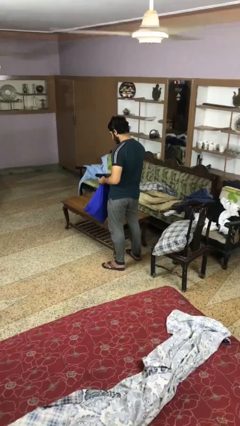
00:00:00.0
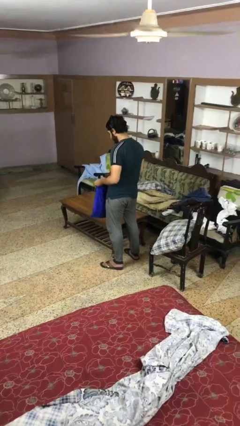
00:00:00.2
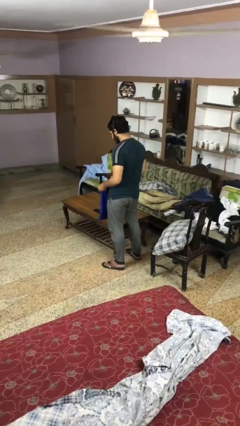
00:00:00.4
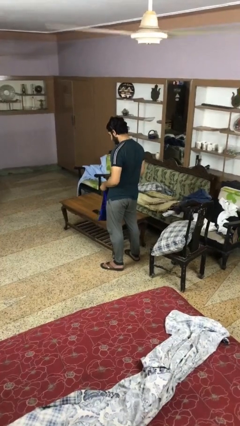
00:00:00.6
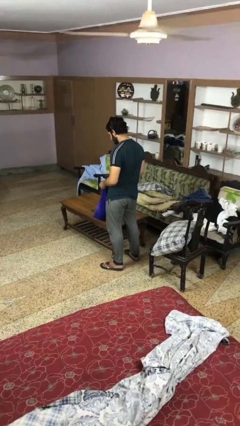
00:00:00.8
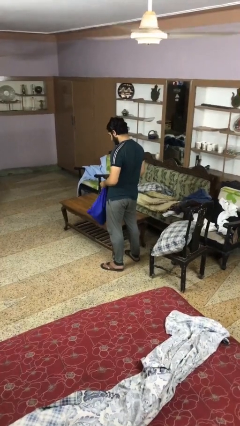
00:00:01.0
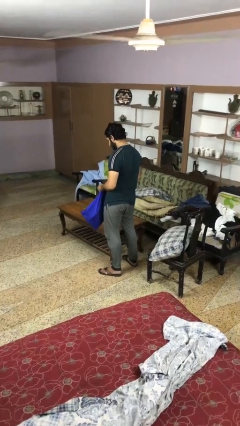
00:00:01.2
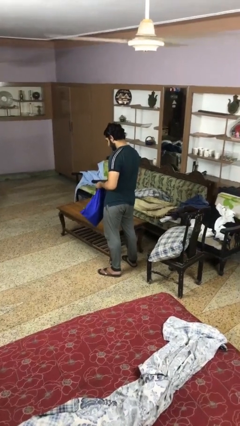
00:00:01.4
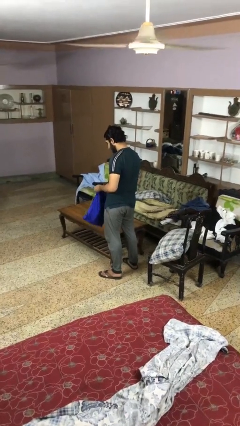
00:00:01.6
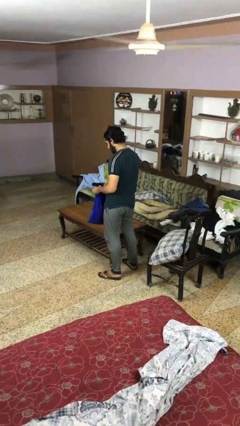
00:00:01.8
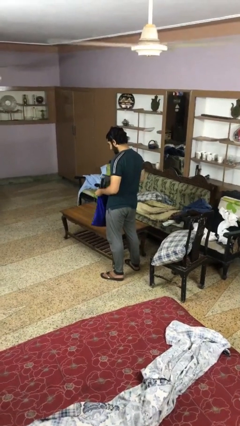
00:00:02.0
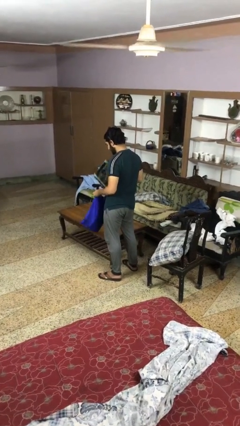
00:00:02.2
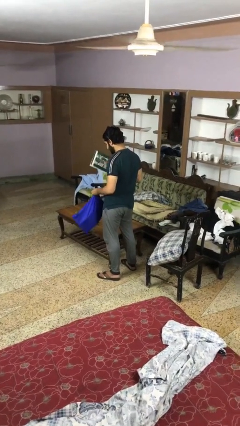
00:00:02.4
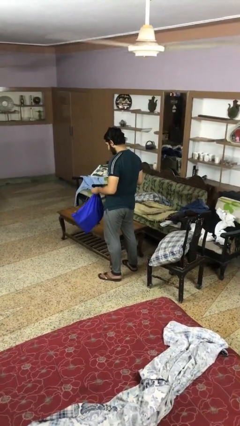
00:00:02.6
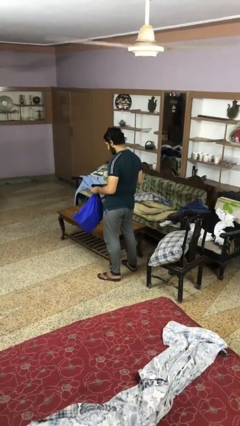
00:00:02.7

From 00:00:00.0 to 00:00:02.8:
person takes object from bag

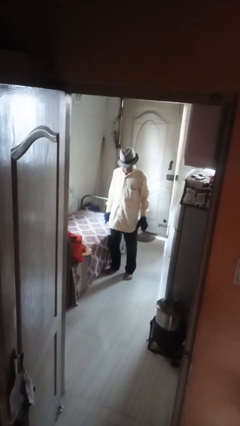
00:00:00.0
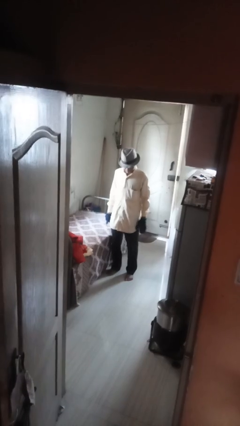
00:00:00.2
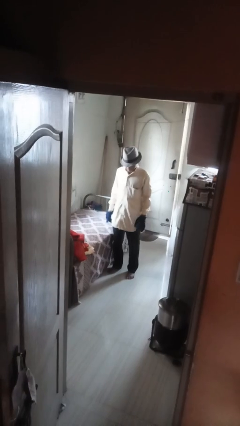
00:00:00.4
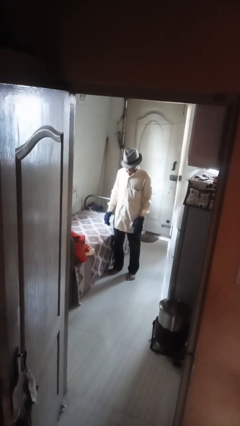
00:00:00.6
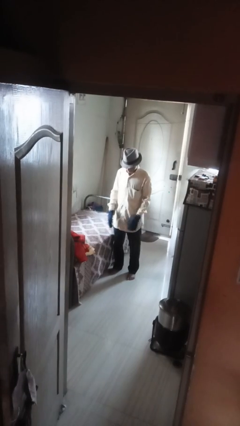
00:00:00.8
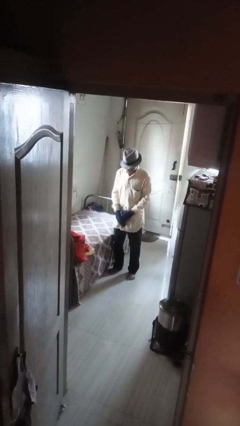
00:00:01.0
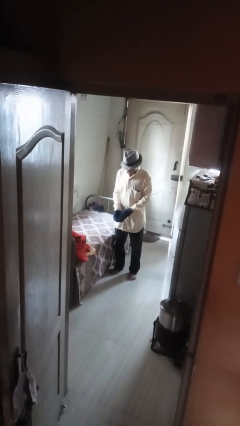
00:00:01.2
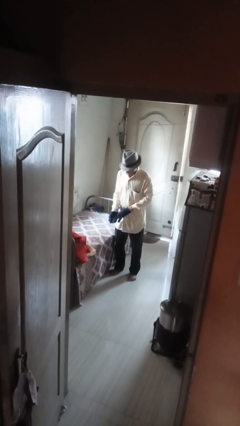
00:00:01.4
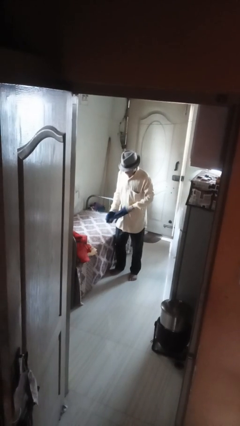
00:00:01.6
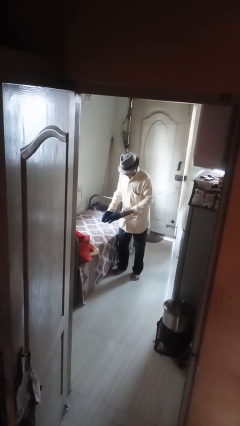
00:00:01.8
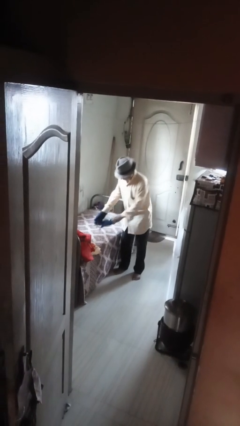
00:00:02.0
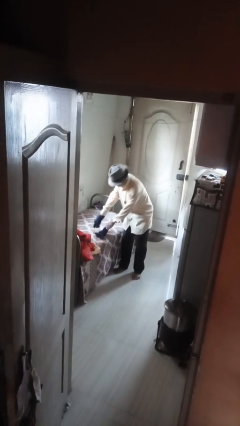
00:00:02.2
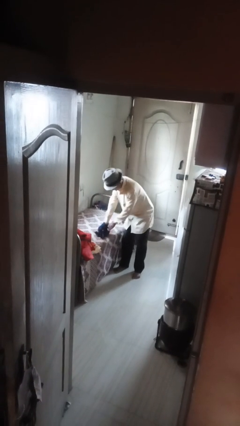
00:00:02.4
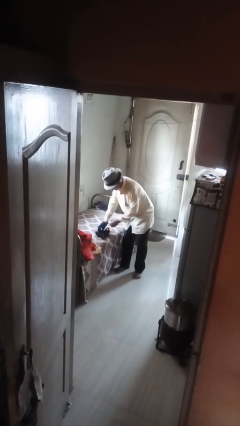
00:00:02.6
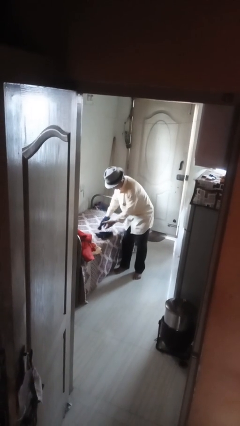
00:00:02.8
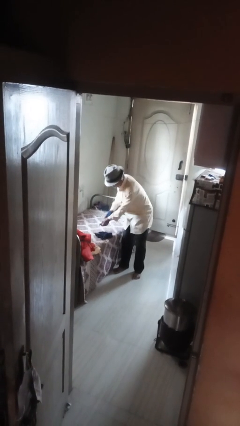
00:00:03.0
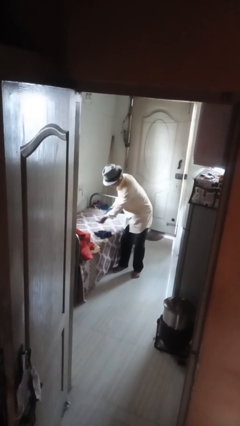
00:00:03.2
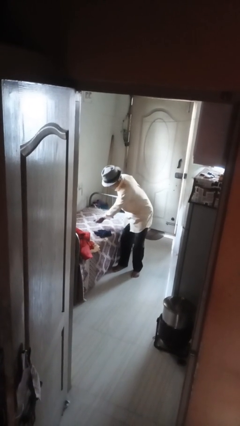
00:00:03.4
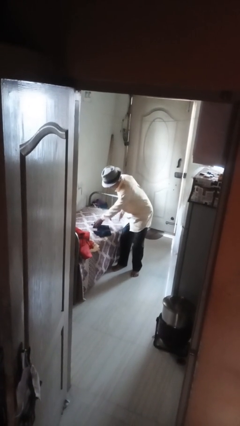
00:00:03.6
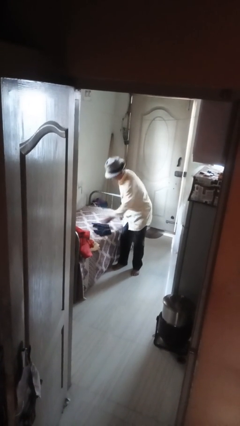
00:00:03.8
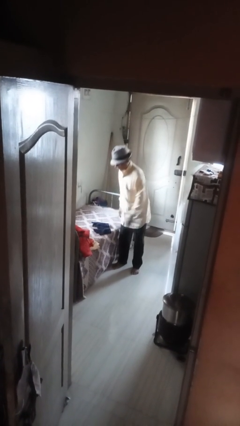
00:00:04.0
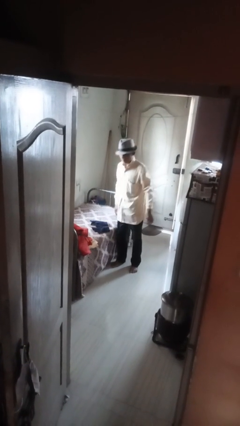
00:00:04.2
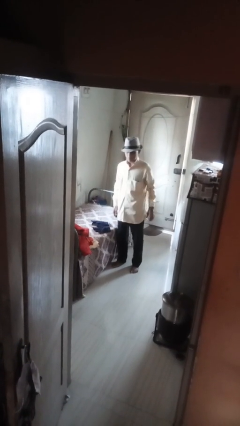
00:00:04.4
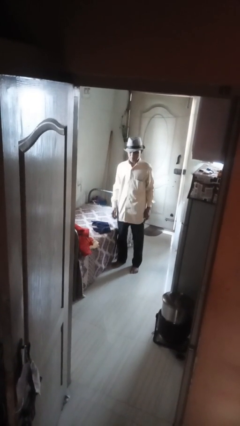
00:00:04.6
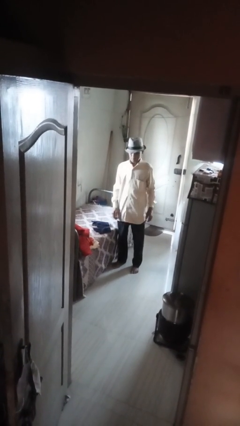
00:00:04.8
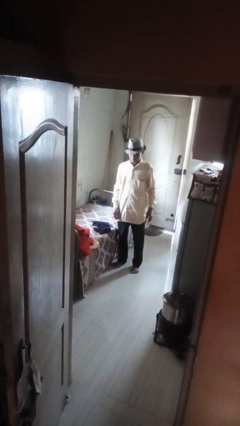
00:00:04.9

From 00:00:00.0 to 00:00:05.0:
person takes off gloves

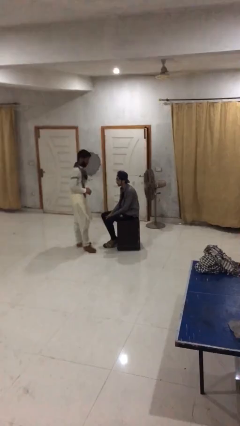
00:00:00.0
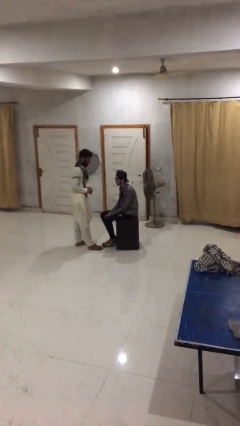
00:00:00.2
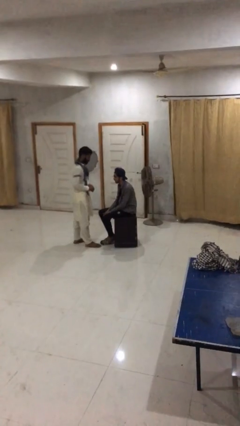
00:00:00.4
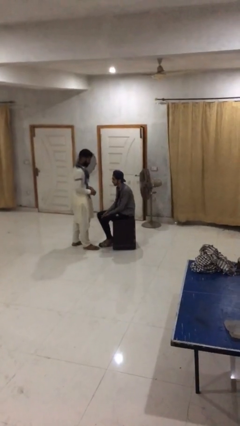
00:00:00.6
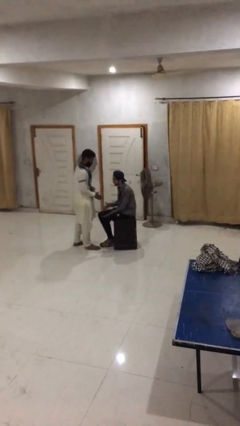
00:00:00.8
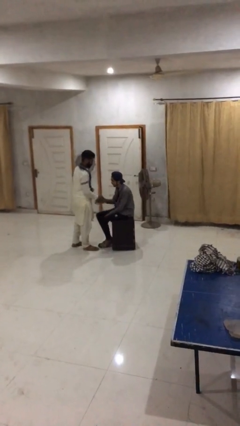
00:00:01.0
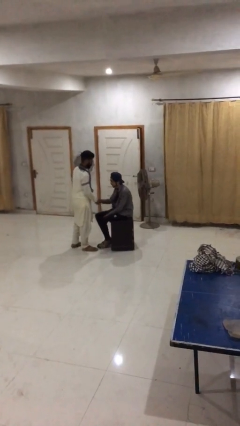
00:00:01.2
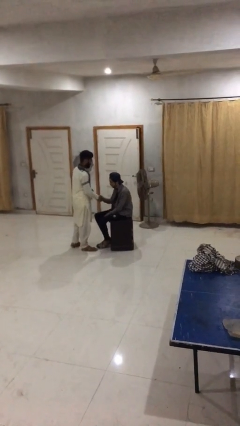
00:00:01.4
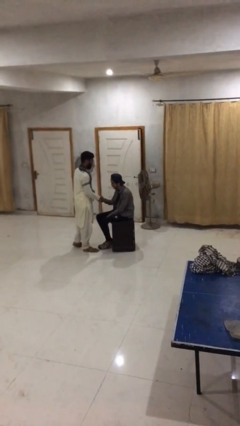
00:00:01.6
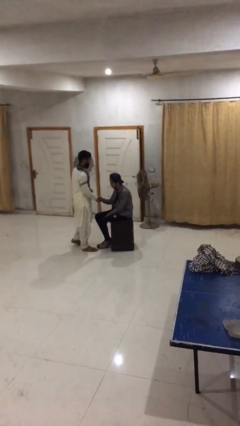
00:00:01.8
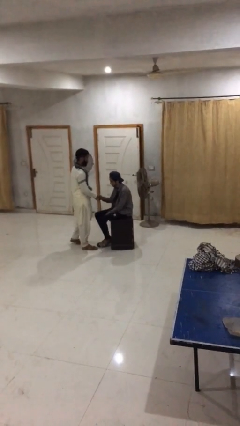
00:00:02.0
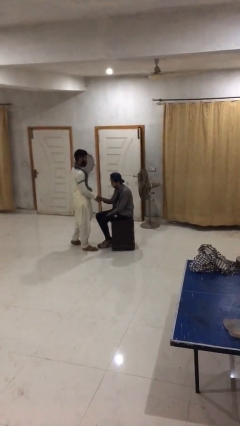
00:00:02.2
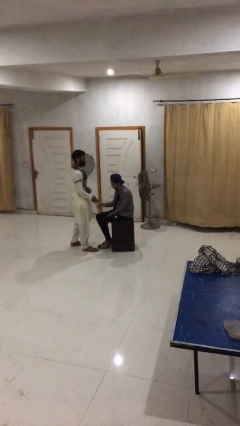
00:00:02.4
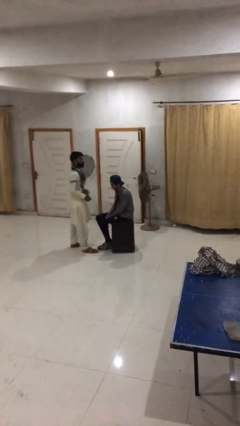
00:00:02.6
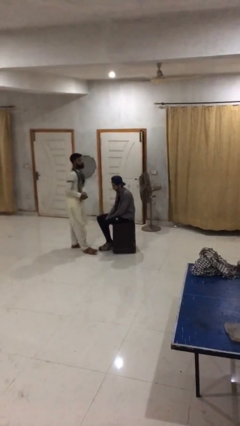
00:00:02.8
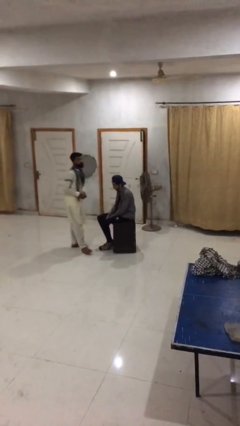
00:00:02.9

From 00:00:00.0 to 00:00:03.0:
person shakes hand

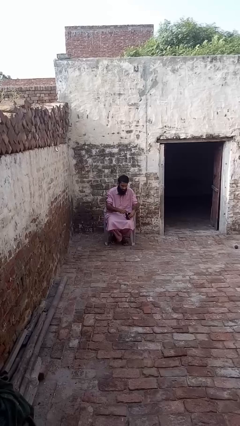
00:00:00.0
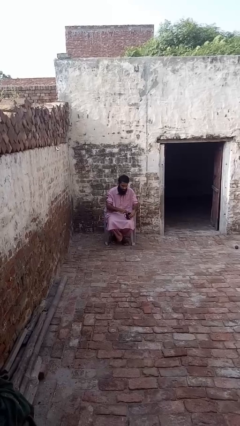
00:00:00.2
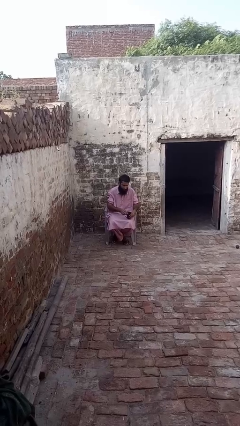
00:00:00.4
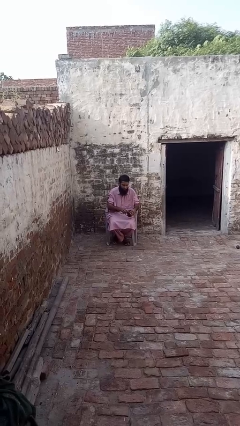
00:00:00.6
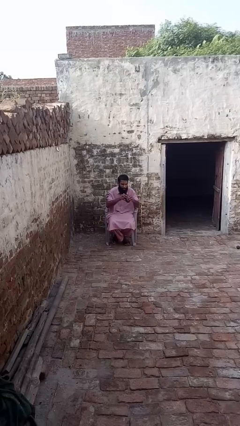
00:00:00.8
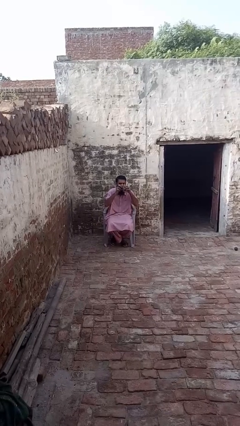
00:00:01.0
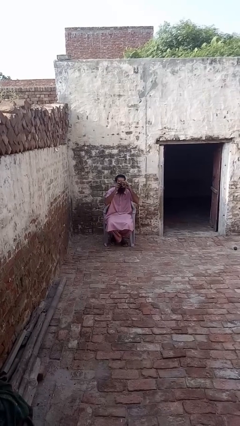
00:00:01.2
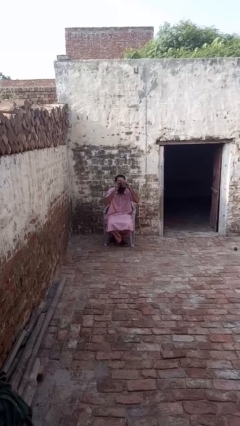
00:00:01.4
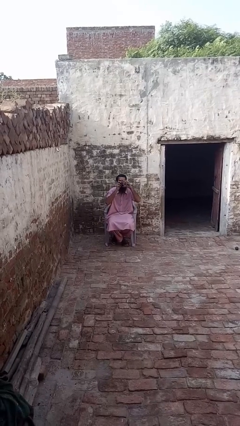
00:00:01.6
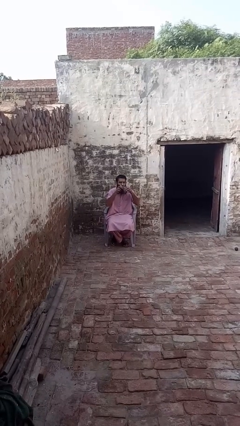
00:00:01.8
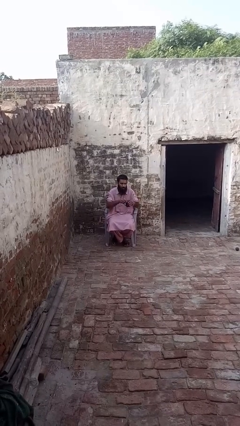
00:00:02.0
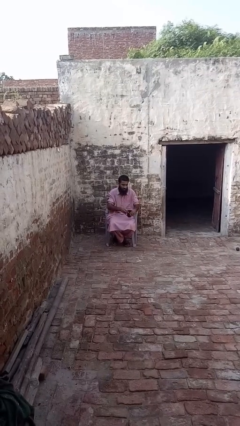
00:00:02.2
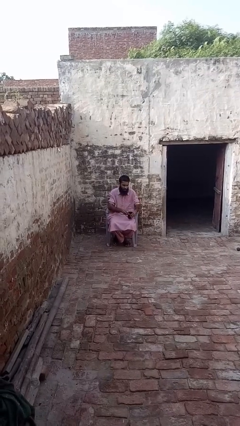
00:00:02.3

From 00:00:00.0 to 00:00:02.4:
person drinks from mug

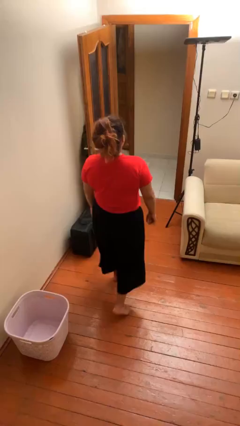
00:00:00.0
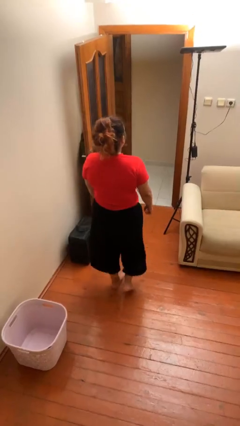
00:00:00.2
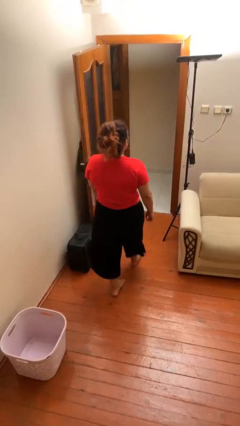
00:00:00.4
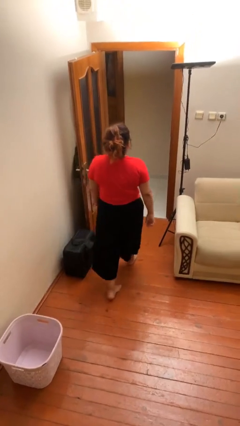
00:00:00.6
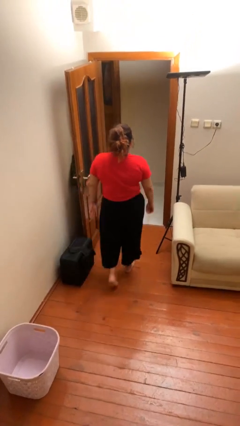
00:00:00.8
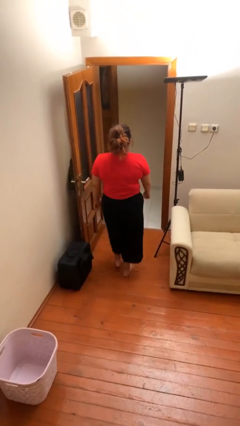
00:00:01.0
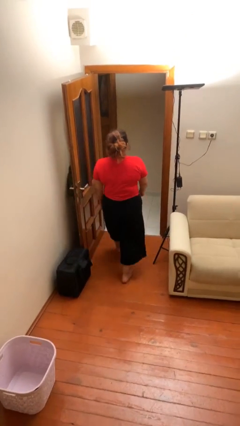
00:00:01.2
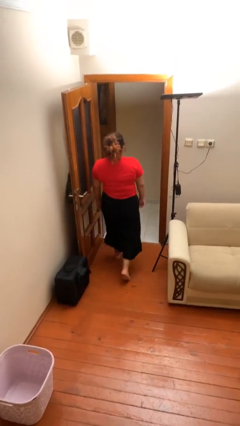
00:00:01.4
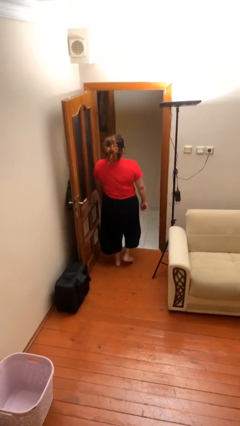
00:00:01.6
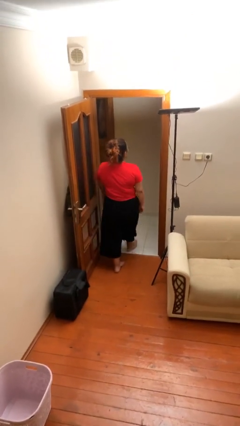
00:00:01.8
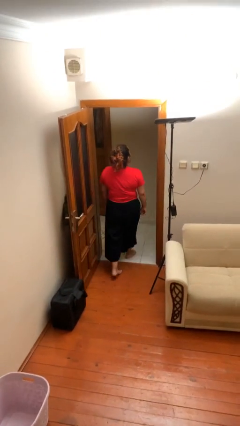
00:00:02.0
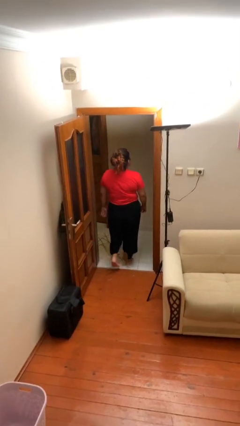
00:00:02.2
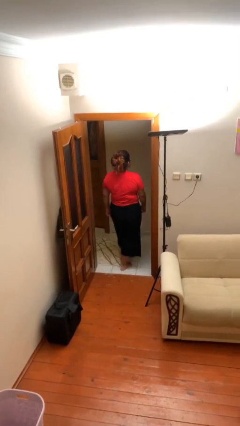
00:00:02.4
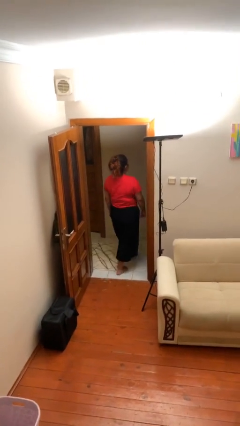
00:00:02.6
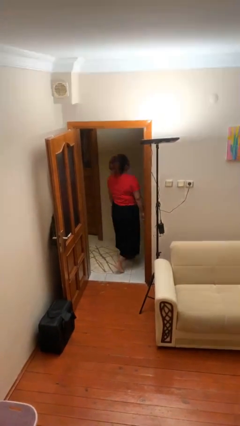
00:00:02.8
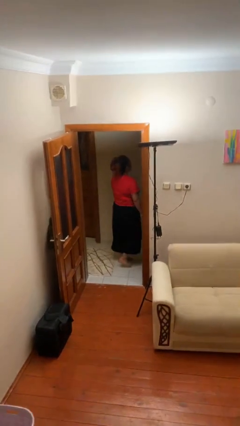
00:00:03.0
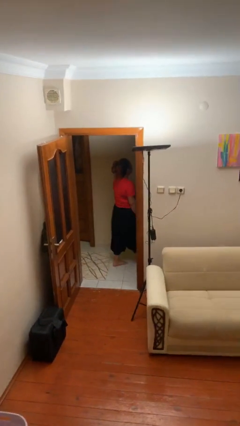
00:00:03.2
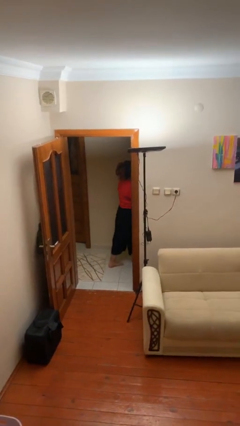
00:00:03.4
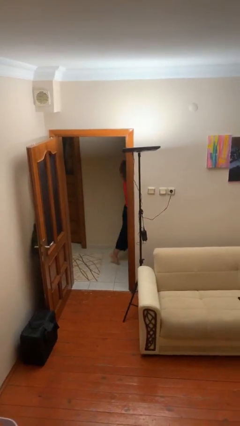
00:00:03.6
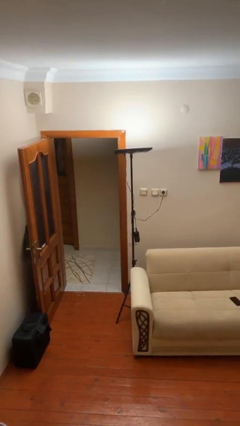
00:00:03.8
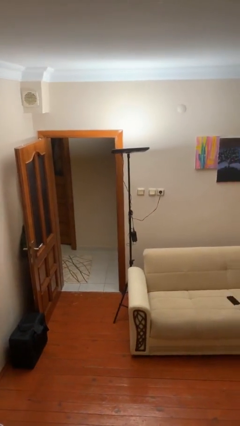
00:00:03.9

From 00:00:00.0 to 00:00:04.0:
person exits scene through structure

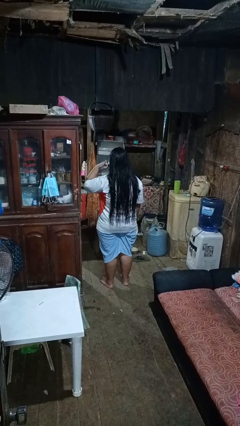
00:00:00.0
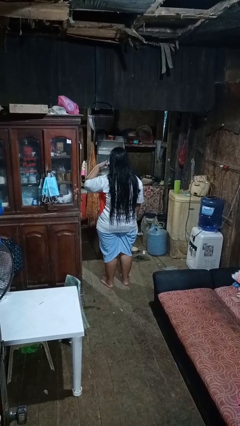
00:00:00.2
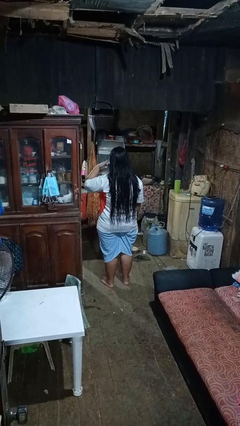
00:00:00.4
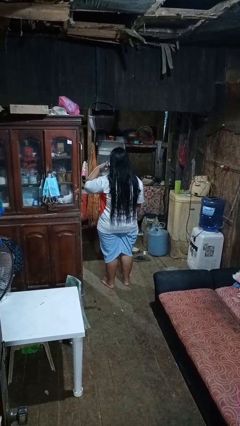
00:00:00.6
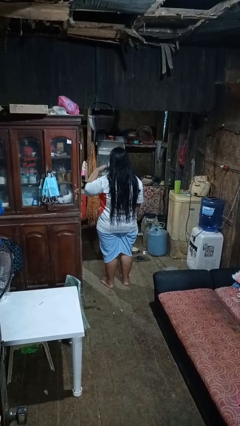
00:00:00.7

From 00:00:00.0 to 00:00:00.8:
person gestures call me
